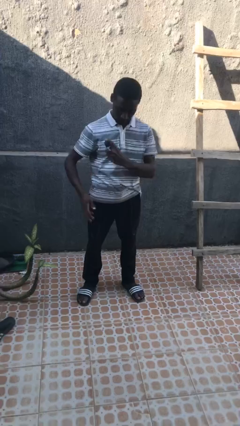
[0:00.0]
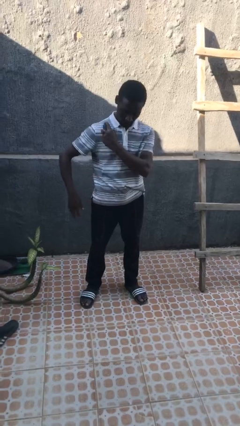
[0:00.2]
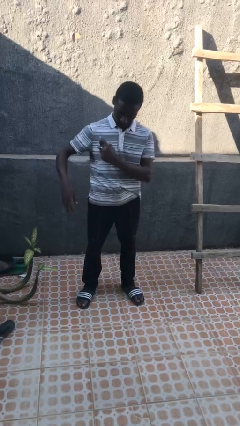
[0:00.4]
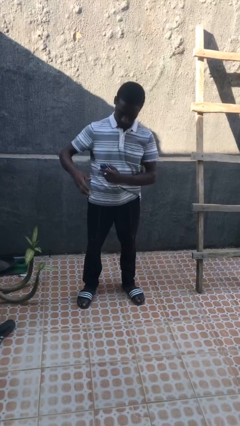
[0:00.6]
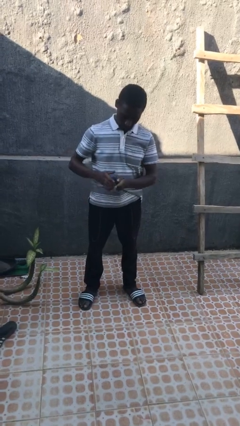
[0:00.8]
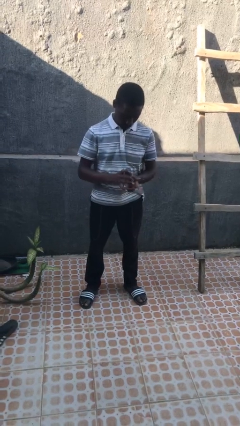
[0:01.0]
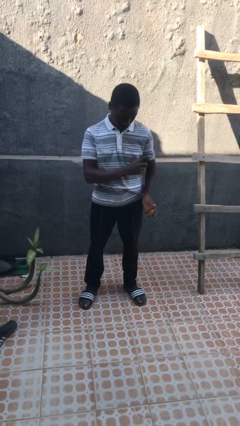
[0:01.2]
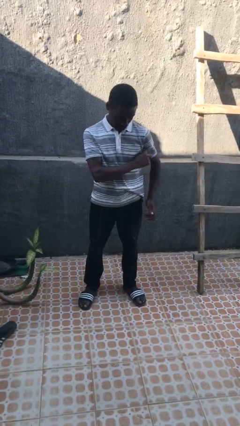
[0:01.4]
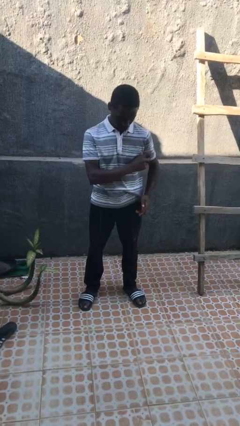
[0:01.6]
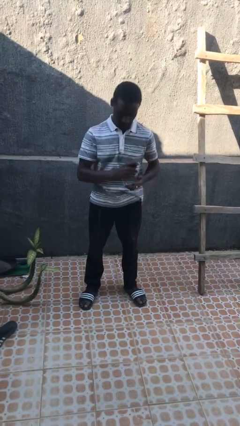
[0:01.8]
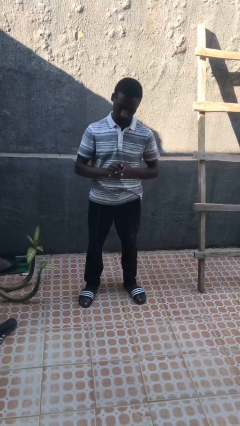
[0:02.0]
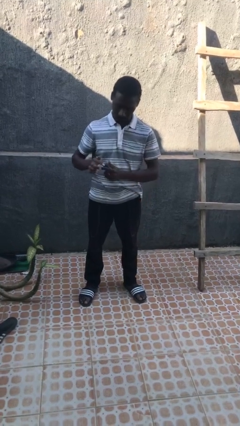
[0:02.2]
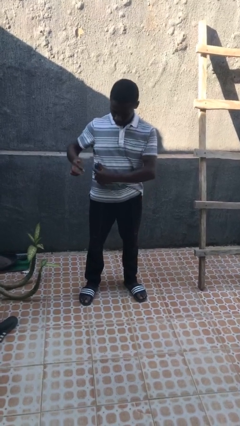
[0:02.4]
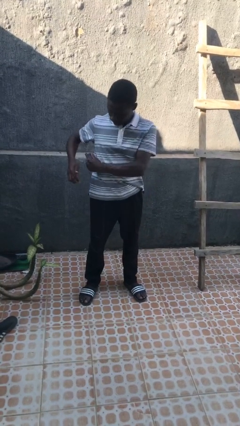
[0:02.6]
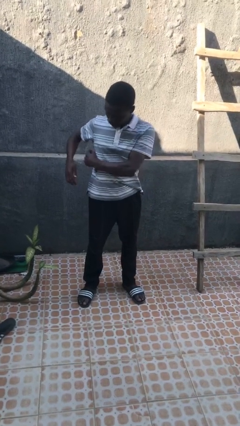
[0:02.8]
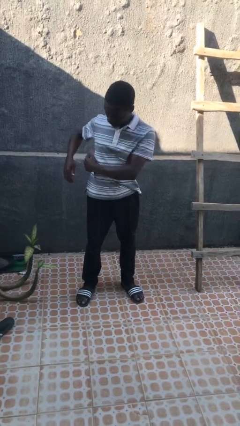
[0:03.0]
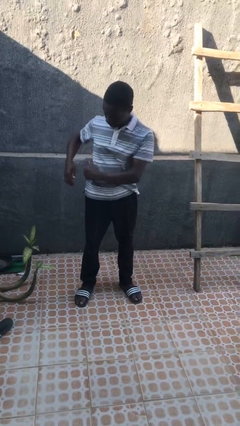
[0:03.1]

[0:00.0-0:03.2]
person applies deodorant

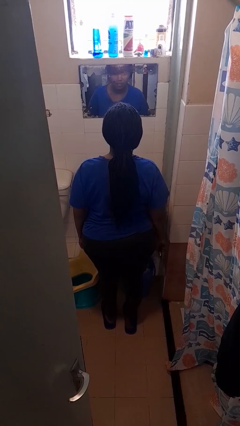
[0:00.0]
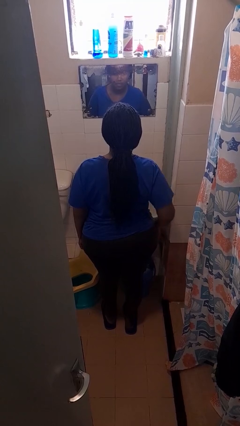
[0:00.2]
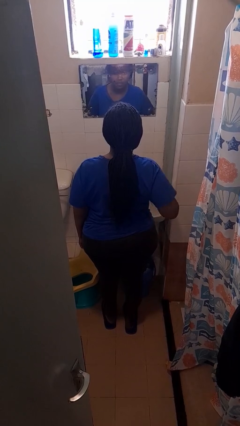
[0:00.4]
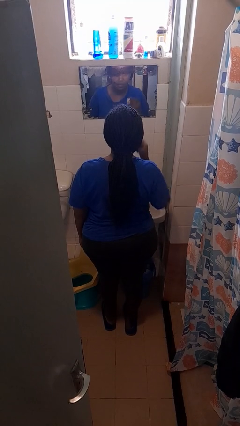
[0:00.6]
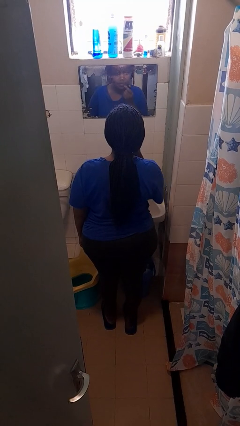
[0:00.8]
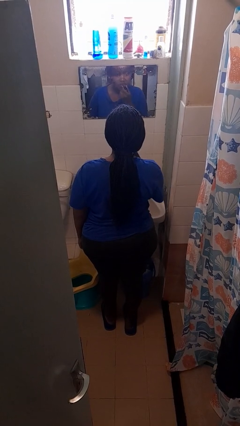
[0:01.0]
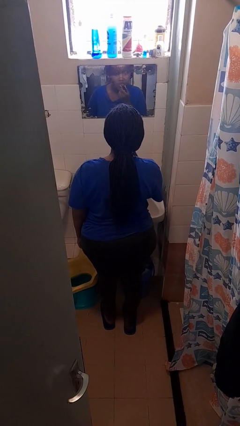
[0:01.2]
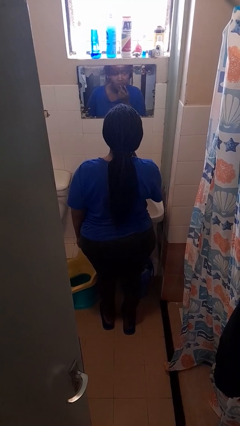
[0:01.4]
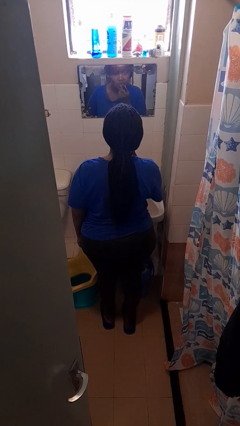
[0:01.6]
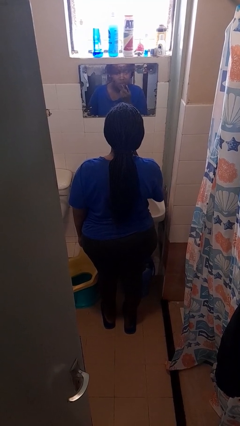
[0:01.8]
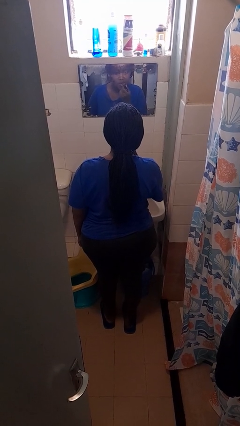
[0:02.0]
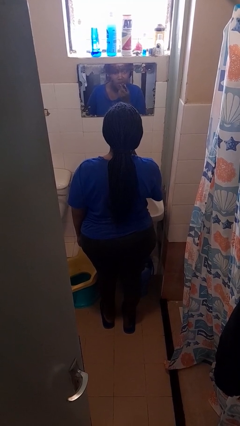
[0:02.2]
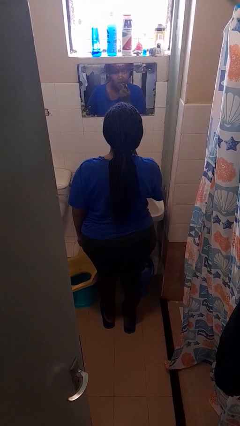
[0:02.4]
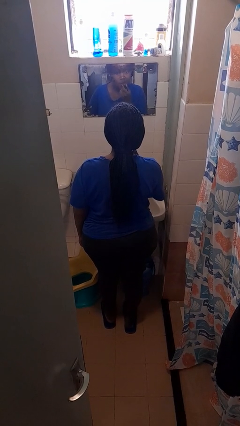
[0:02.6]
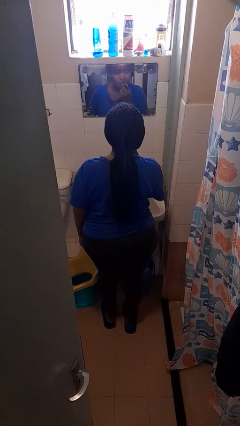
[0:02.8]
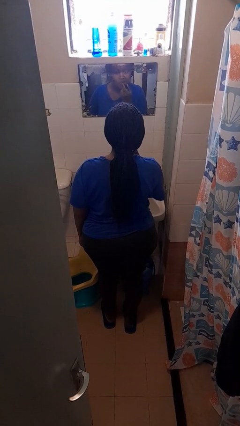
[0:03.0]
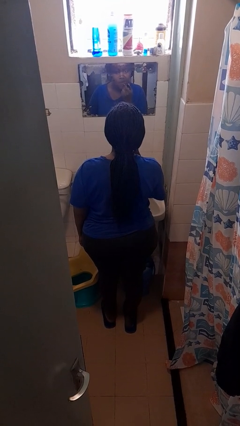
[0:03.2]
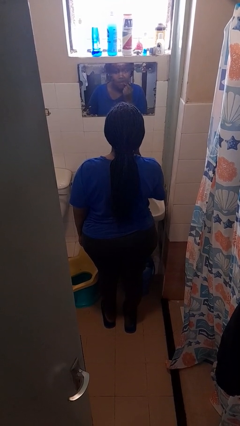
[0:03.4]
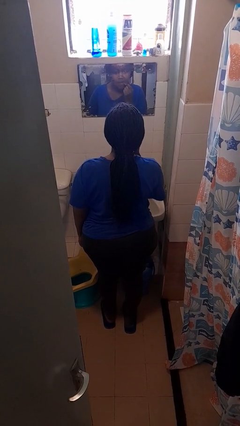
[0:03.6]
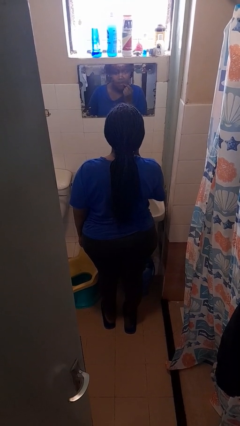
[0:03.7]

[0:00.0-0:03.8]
person applies lip makeup

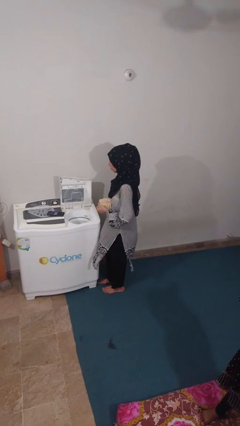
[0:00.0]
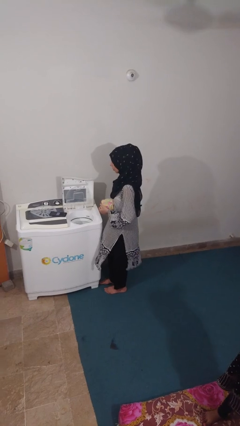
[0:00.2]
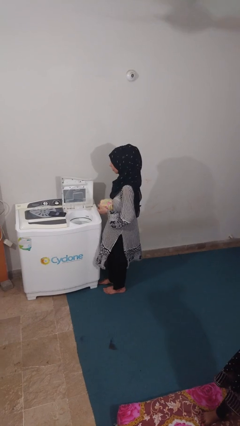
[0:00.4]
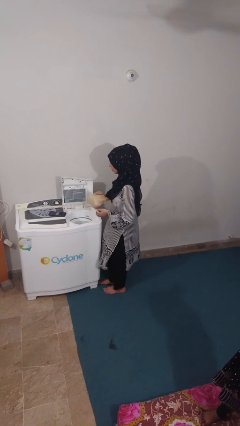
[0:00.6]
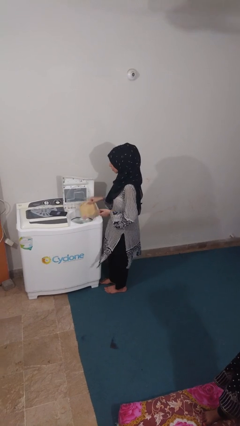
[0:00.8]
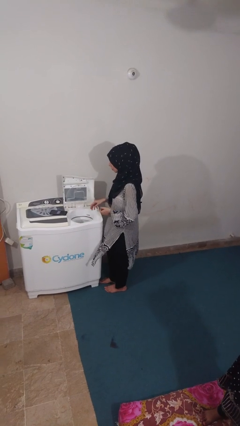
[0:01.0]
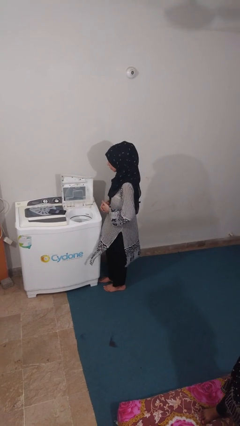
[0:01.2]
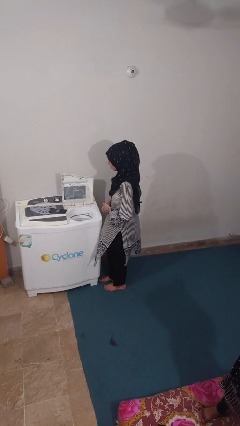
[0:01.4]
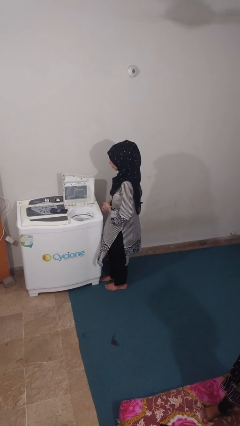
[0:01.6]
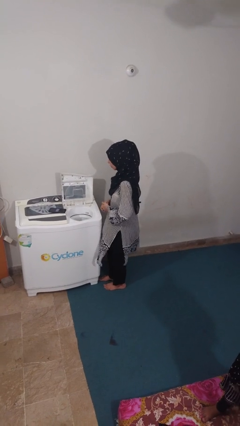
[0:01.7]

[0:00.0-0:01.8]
person loads dryer

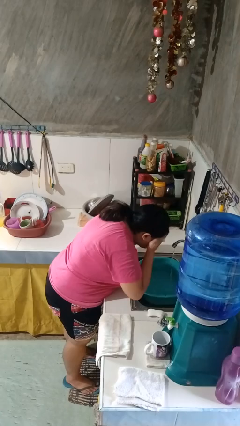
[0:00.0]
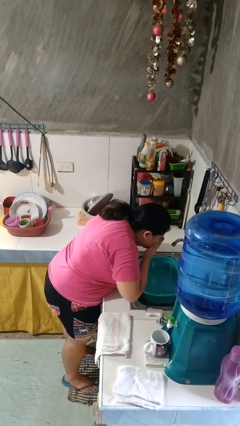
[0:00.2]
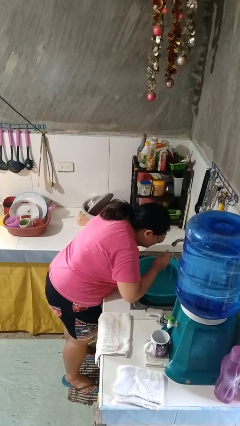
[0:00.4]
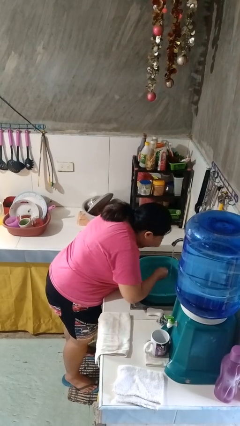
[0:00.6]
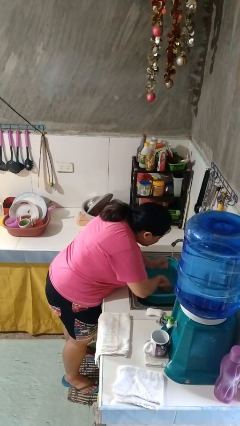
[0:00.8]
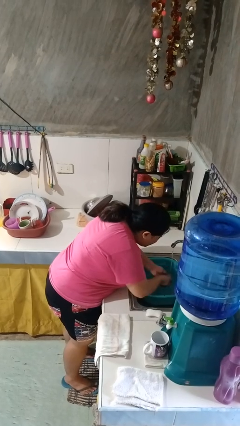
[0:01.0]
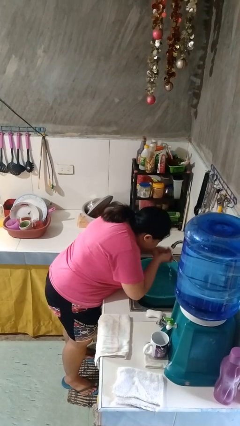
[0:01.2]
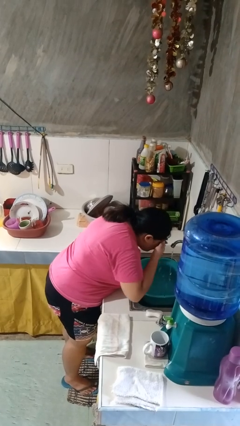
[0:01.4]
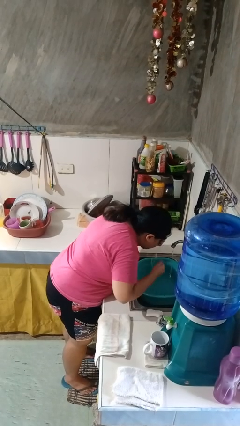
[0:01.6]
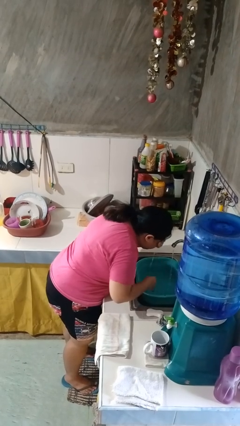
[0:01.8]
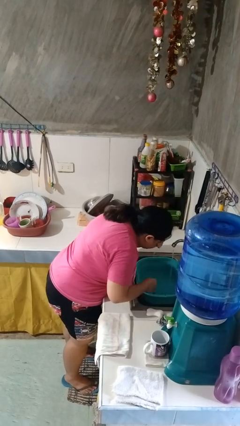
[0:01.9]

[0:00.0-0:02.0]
person washes face

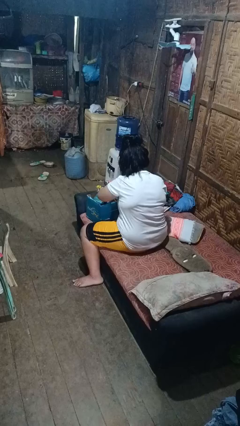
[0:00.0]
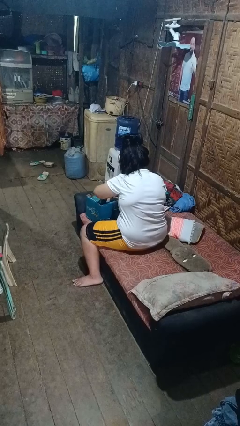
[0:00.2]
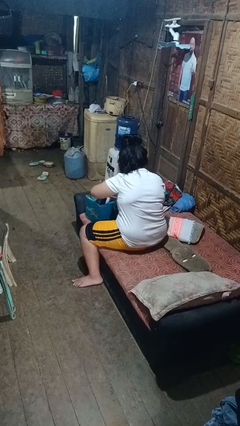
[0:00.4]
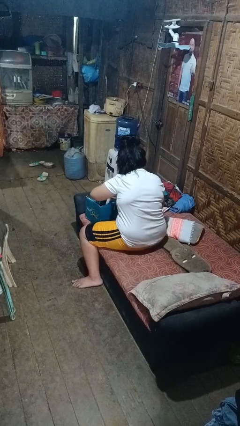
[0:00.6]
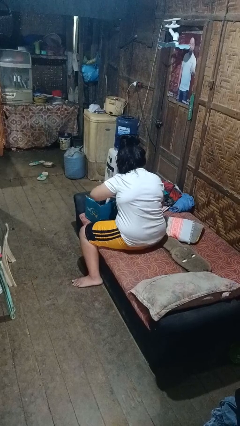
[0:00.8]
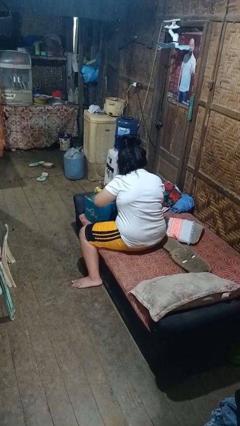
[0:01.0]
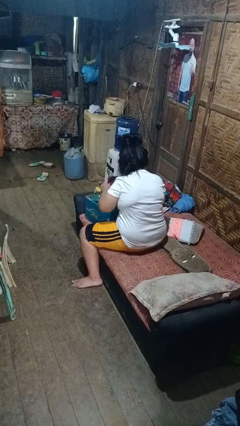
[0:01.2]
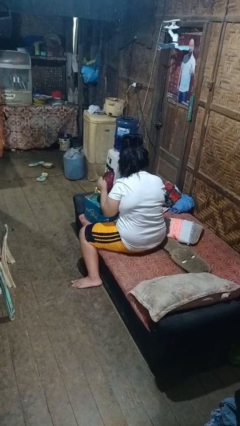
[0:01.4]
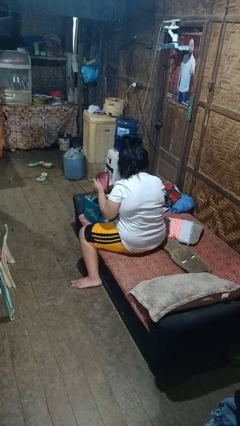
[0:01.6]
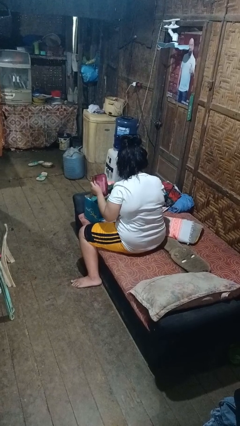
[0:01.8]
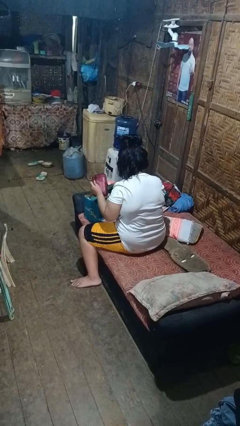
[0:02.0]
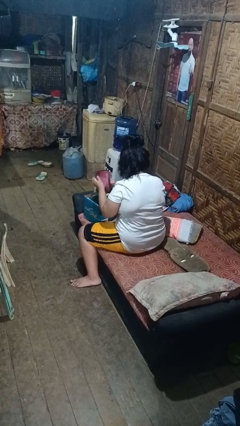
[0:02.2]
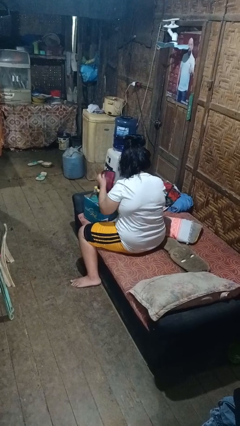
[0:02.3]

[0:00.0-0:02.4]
person searches in box

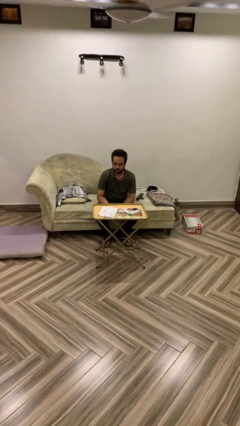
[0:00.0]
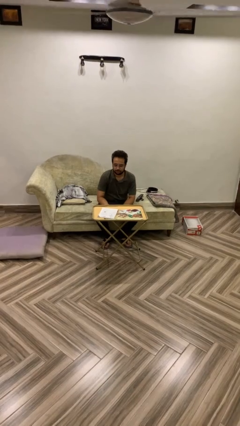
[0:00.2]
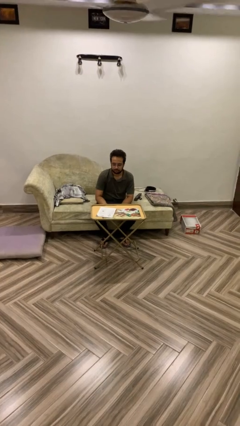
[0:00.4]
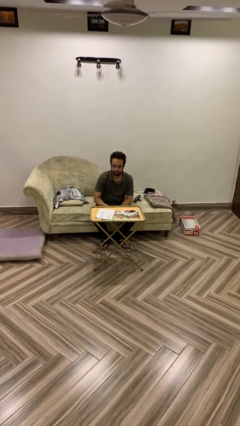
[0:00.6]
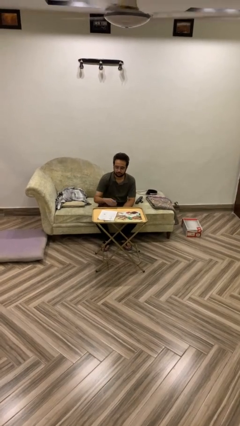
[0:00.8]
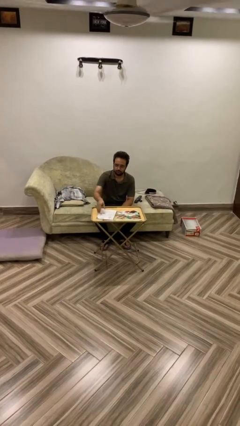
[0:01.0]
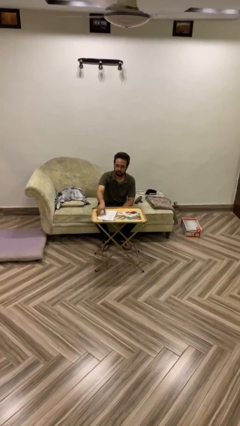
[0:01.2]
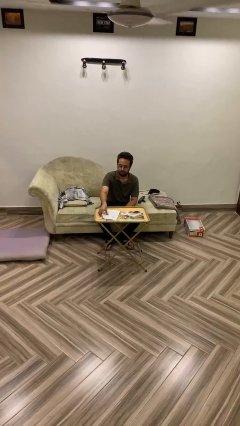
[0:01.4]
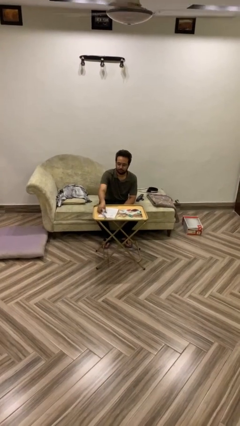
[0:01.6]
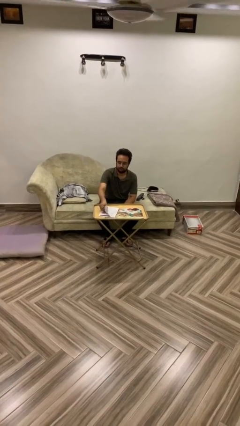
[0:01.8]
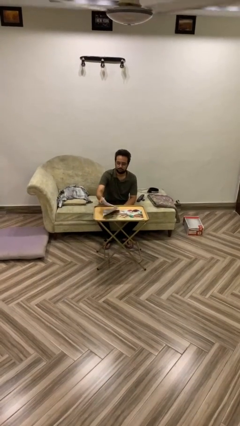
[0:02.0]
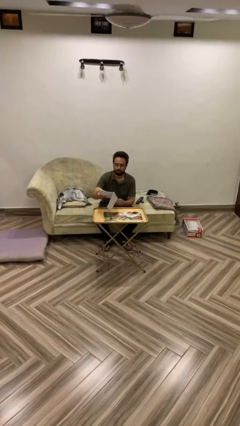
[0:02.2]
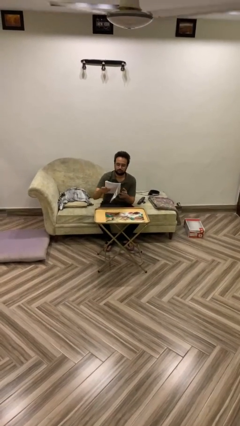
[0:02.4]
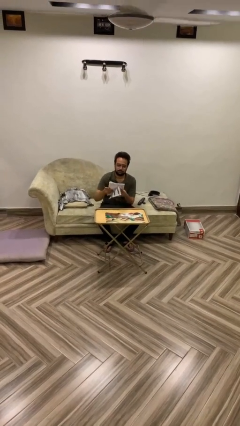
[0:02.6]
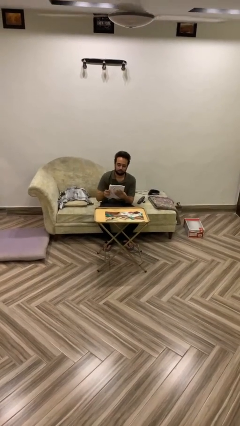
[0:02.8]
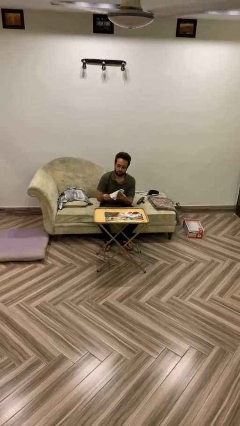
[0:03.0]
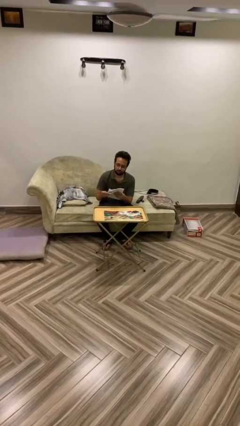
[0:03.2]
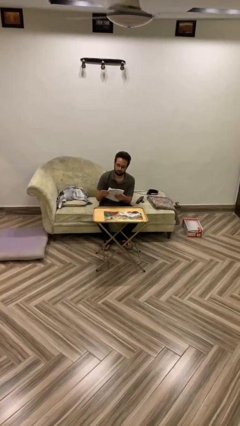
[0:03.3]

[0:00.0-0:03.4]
person picks up object from table

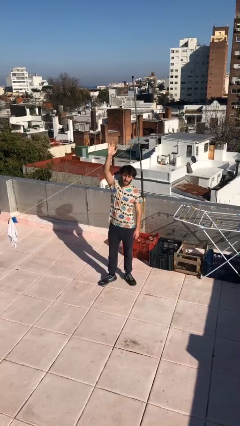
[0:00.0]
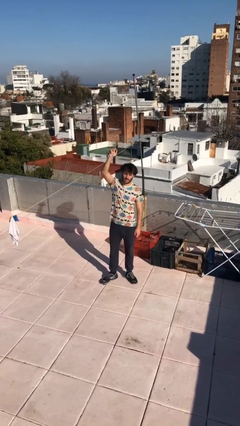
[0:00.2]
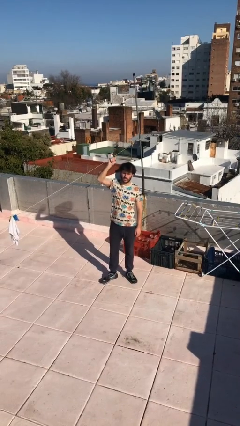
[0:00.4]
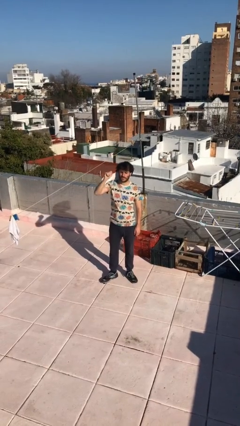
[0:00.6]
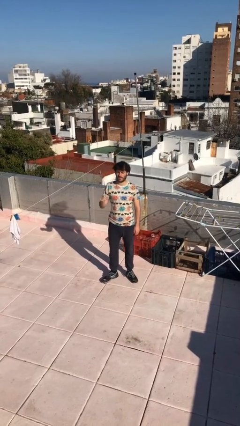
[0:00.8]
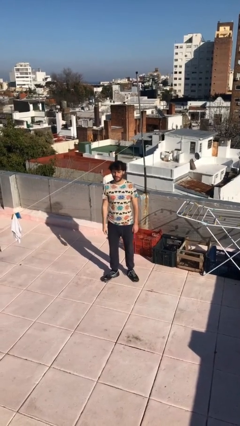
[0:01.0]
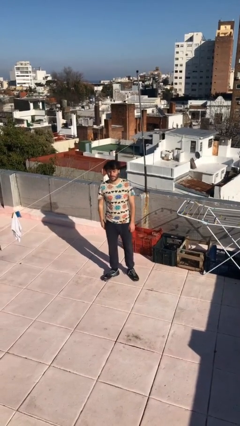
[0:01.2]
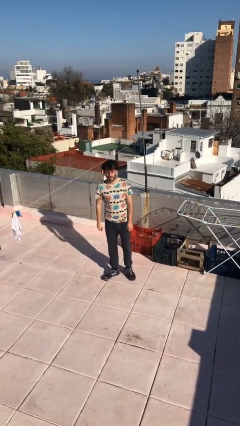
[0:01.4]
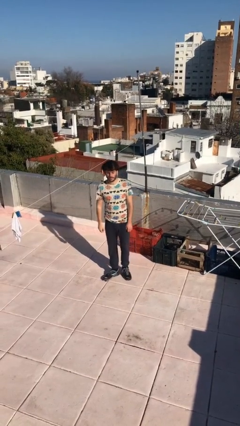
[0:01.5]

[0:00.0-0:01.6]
person gestures lower hand
